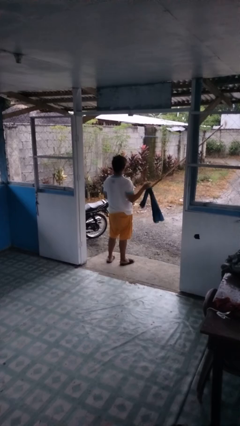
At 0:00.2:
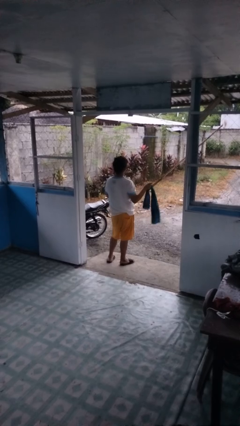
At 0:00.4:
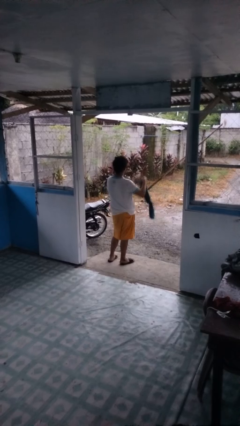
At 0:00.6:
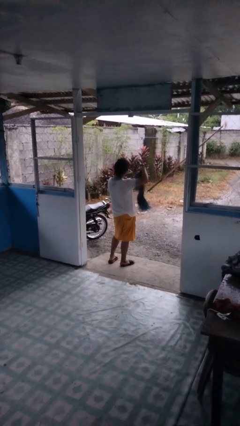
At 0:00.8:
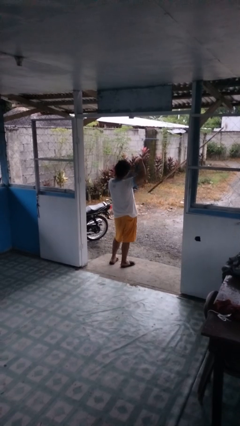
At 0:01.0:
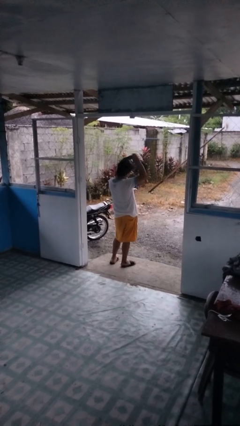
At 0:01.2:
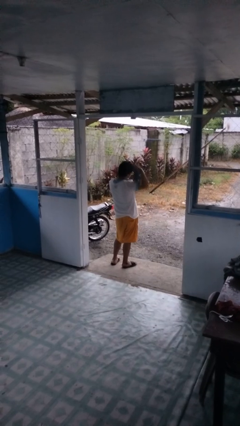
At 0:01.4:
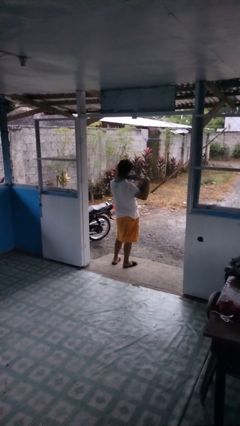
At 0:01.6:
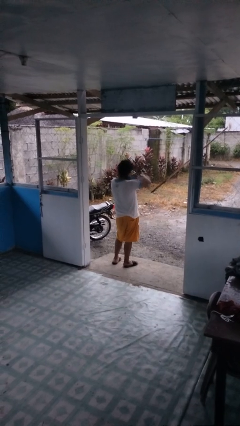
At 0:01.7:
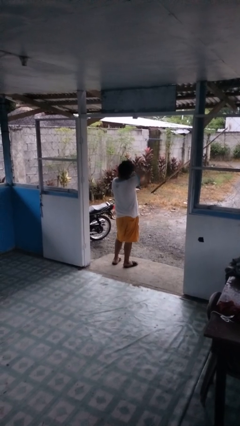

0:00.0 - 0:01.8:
person puts on scarf

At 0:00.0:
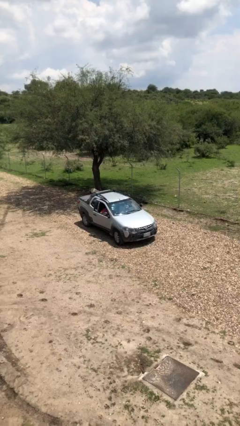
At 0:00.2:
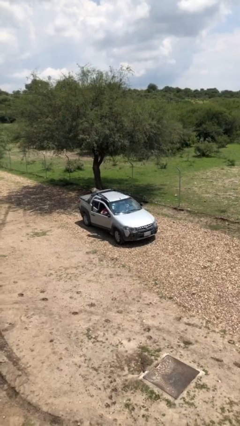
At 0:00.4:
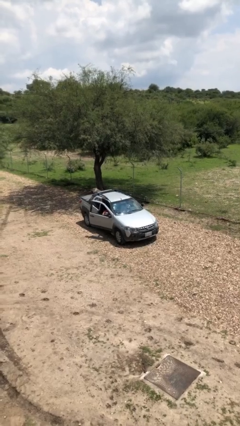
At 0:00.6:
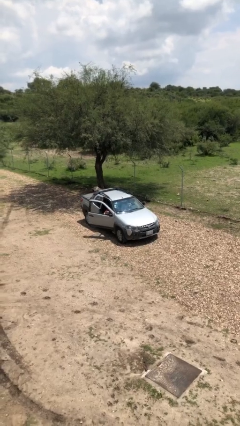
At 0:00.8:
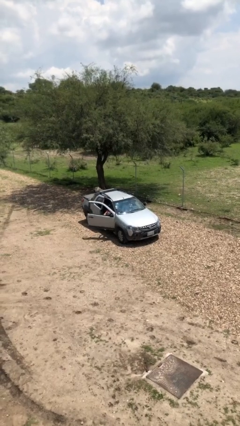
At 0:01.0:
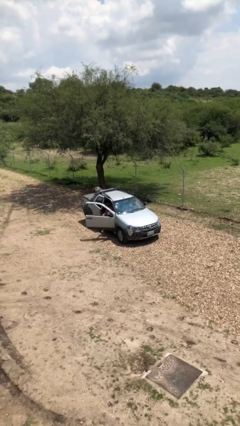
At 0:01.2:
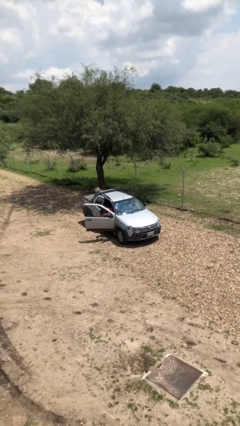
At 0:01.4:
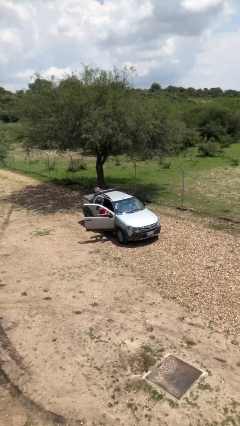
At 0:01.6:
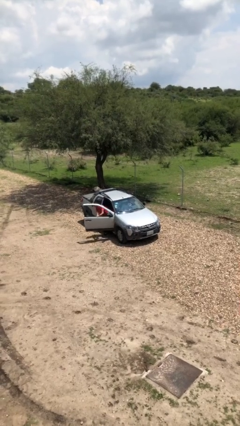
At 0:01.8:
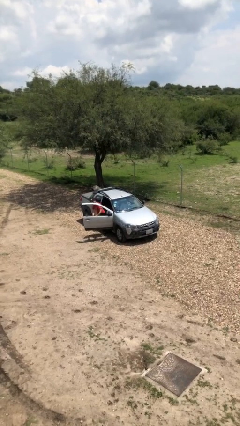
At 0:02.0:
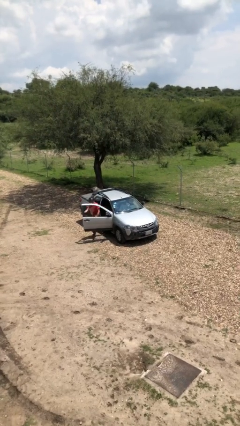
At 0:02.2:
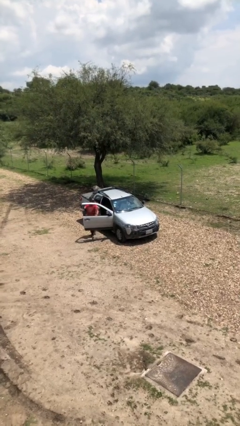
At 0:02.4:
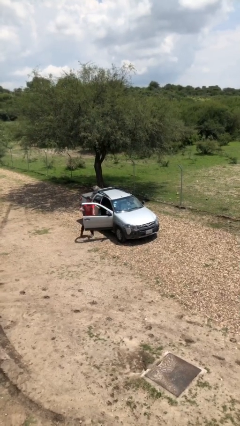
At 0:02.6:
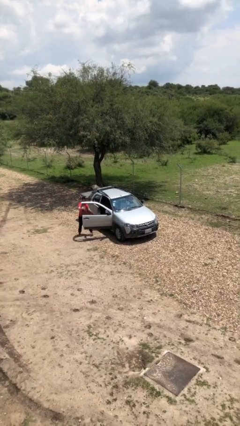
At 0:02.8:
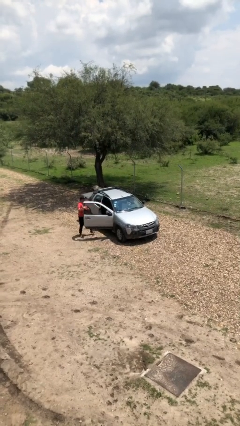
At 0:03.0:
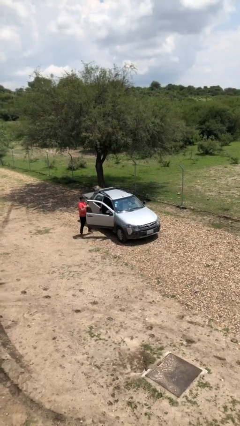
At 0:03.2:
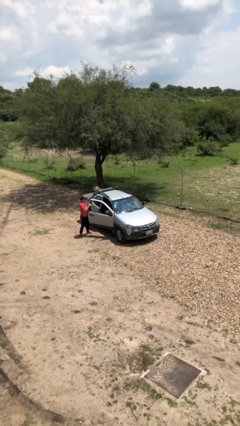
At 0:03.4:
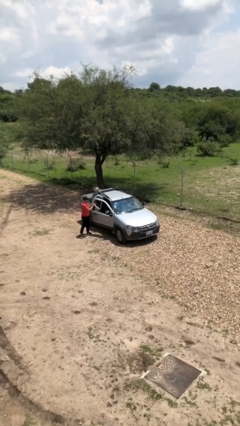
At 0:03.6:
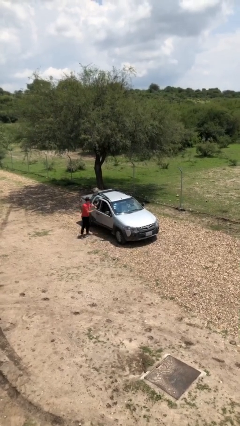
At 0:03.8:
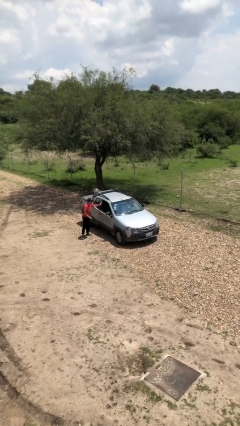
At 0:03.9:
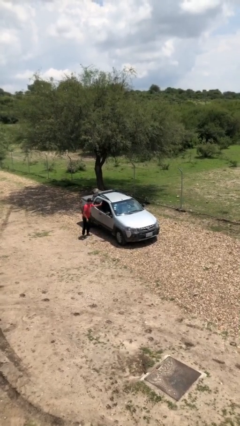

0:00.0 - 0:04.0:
car drops off person

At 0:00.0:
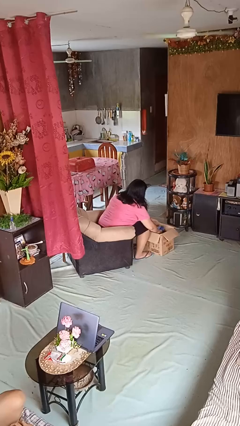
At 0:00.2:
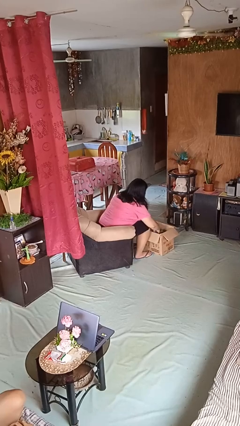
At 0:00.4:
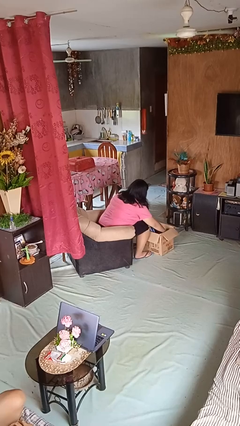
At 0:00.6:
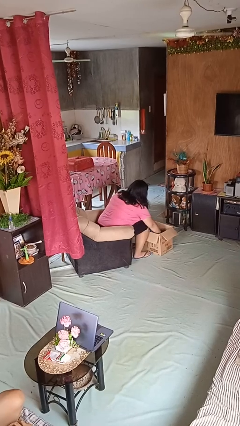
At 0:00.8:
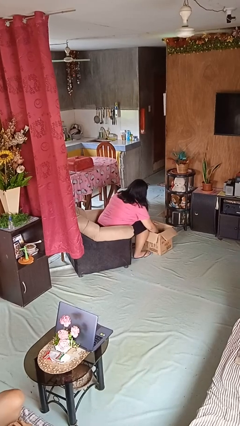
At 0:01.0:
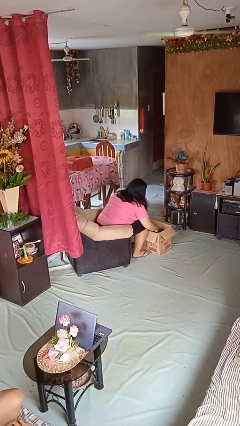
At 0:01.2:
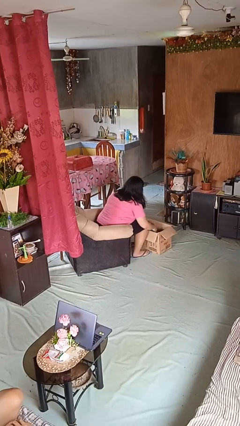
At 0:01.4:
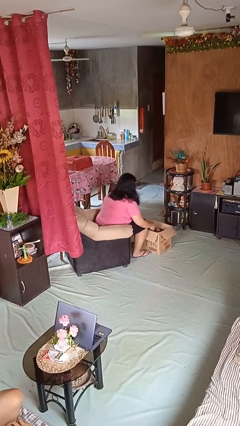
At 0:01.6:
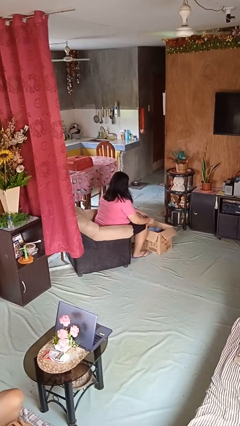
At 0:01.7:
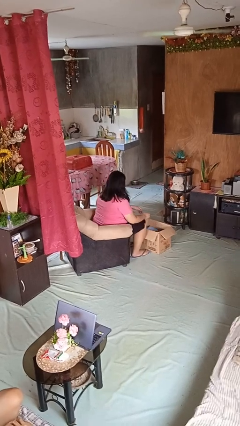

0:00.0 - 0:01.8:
person searches in box

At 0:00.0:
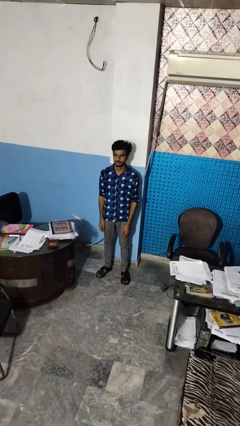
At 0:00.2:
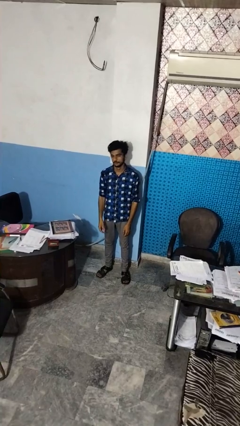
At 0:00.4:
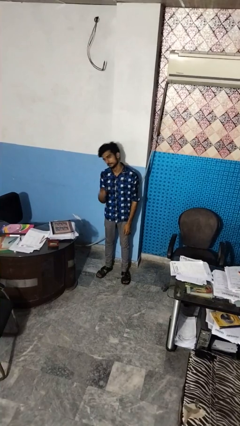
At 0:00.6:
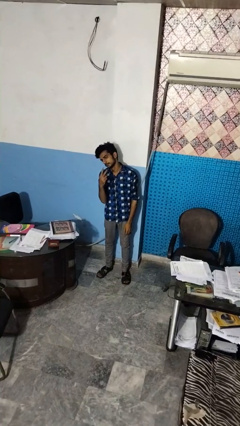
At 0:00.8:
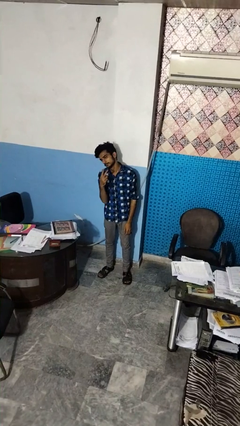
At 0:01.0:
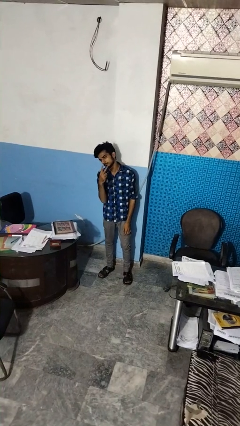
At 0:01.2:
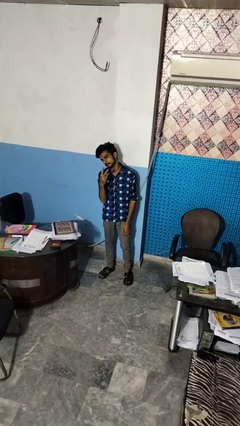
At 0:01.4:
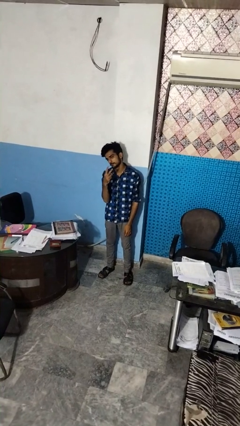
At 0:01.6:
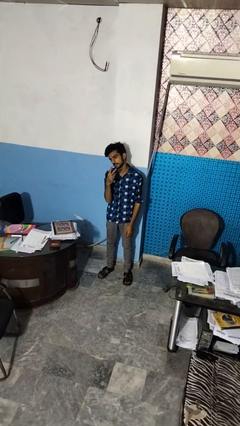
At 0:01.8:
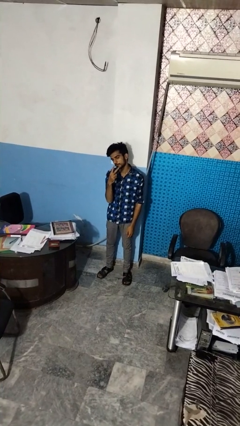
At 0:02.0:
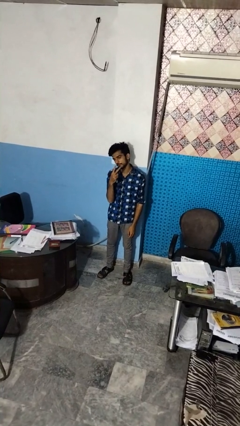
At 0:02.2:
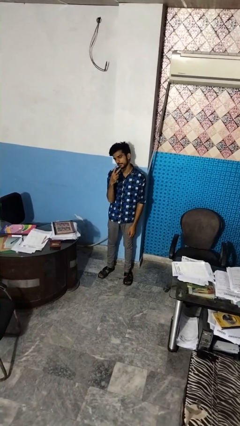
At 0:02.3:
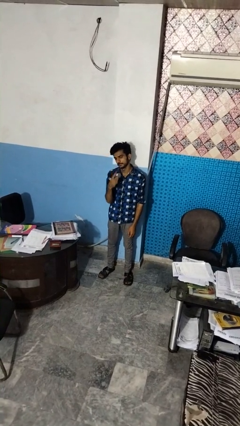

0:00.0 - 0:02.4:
person gestures peace

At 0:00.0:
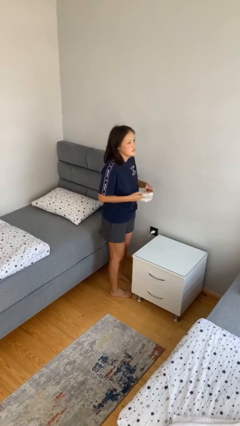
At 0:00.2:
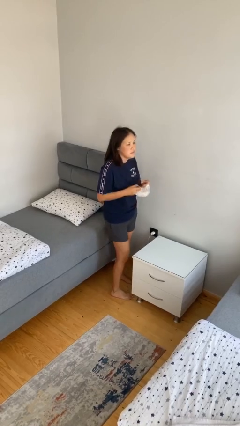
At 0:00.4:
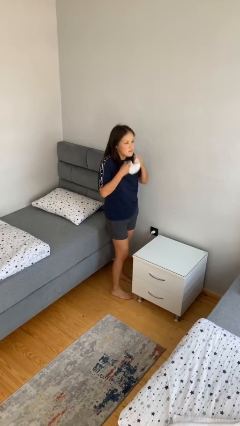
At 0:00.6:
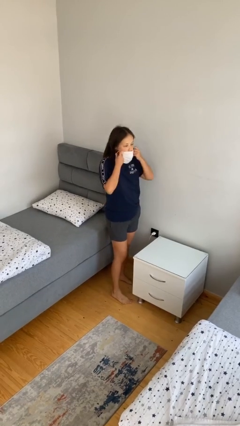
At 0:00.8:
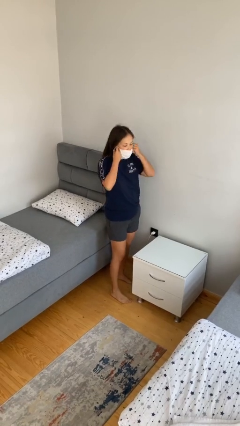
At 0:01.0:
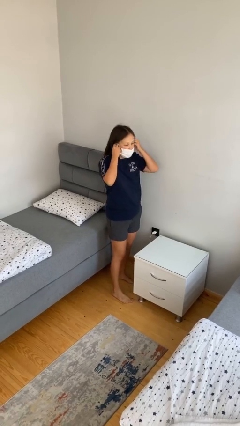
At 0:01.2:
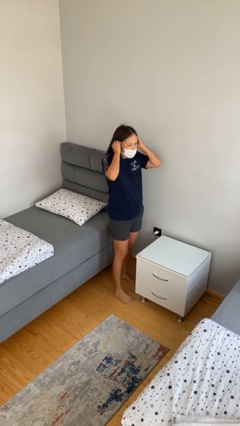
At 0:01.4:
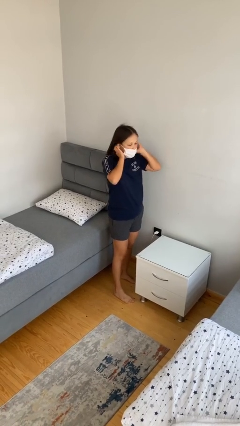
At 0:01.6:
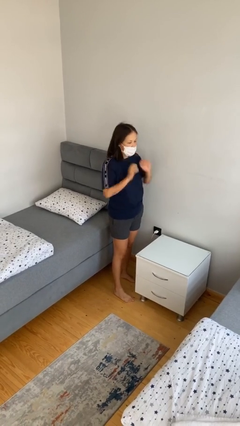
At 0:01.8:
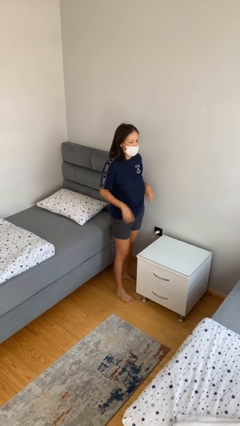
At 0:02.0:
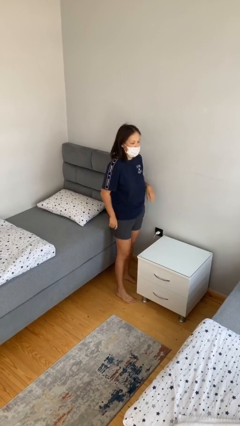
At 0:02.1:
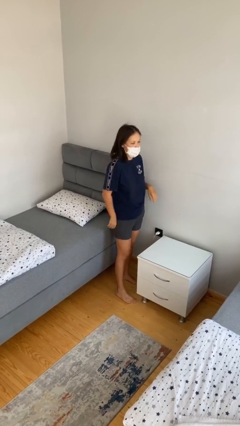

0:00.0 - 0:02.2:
person puts on facemask

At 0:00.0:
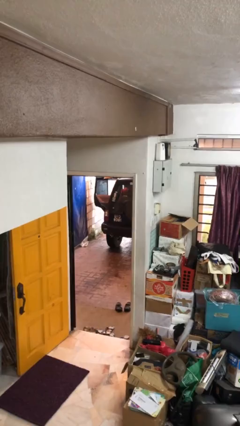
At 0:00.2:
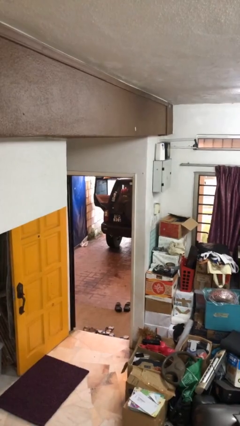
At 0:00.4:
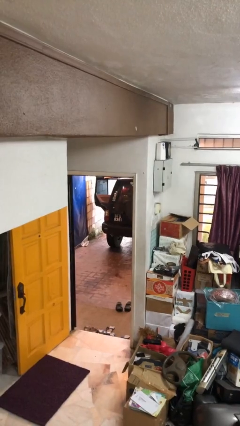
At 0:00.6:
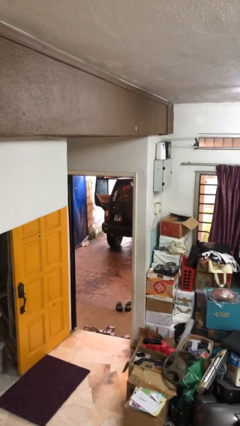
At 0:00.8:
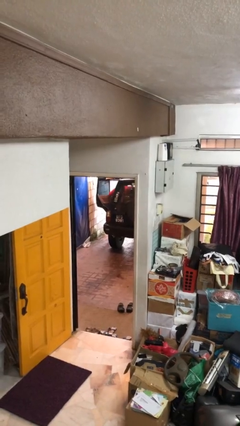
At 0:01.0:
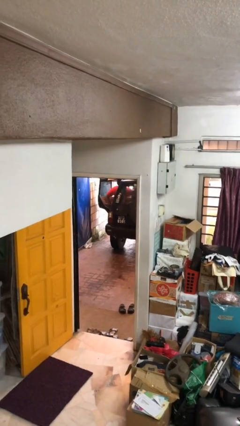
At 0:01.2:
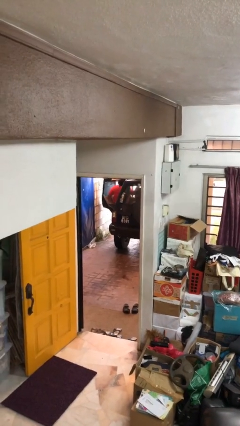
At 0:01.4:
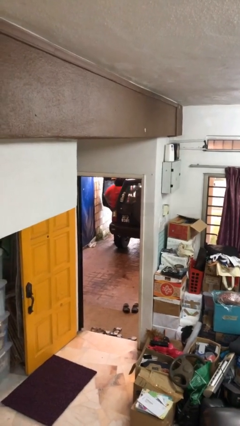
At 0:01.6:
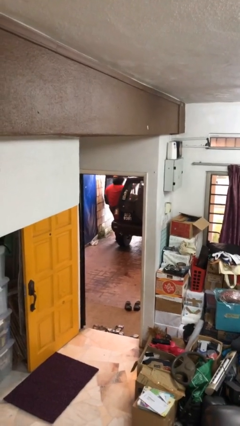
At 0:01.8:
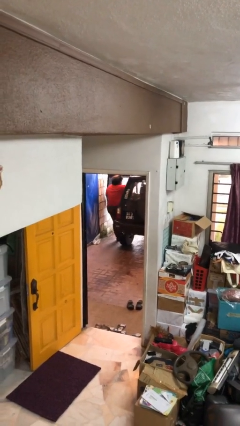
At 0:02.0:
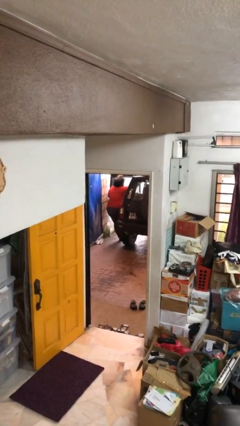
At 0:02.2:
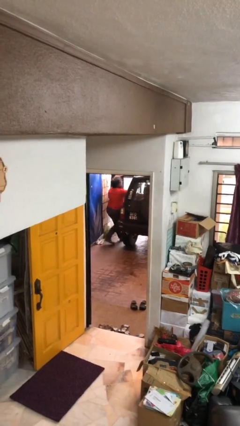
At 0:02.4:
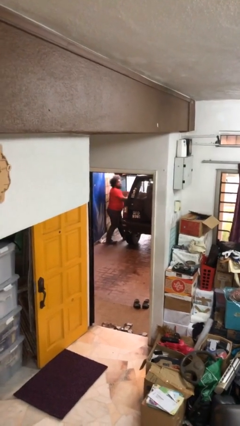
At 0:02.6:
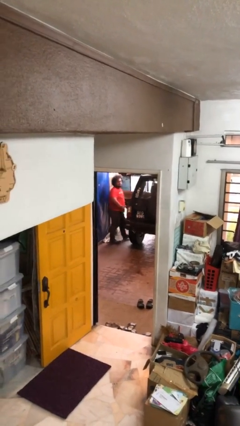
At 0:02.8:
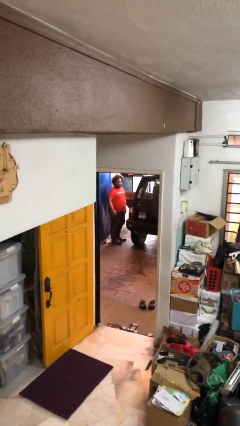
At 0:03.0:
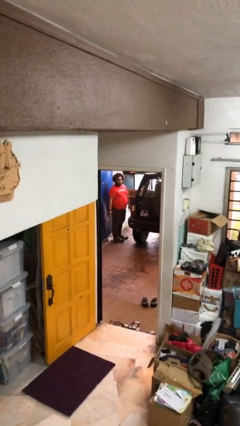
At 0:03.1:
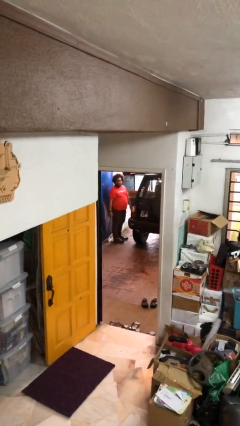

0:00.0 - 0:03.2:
person exits car

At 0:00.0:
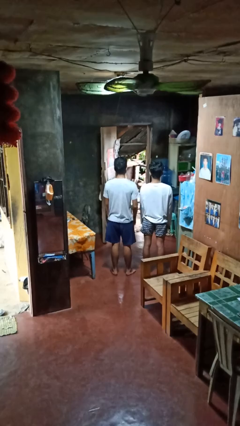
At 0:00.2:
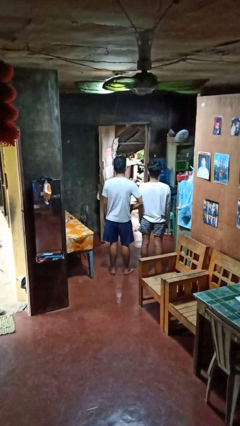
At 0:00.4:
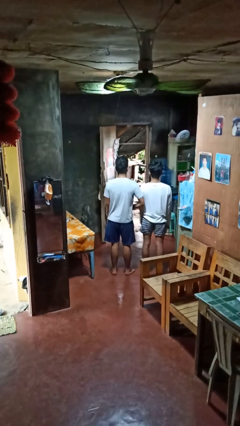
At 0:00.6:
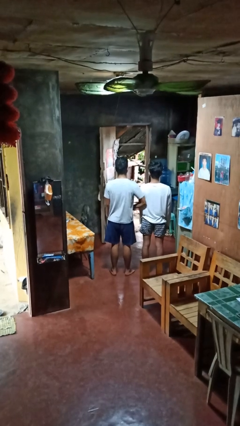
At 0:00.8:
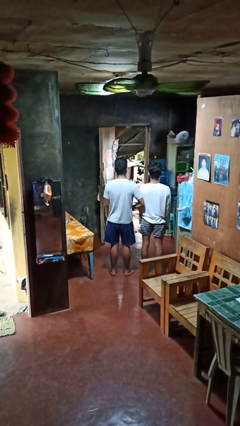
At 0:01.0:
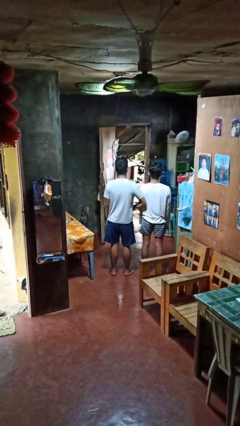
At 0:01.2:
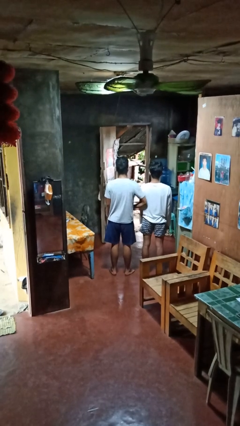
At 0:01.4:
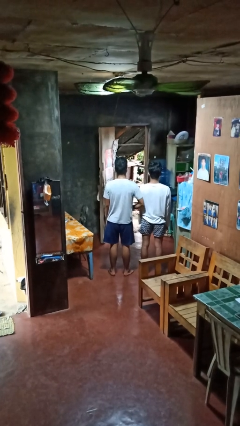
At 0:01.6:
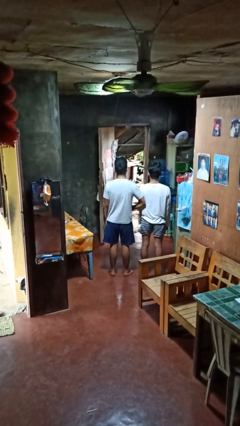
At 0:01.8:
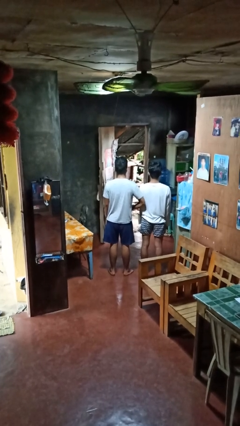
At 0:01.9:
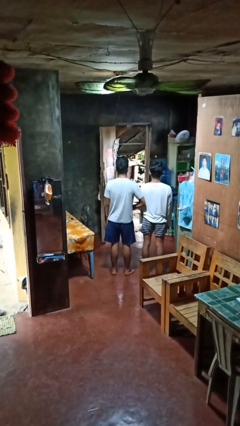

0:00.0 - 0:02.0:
person nudges person with elbow
